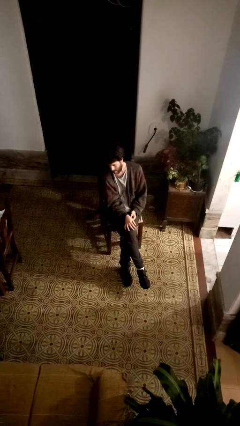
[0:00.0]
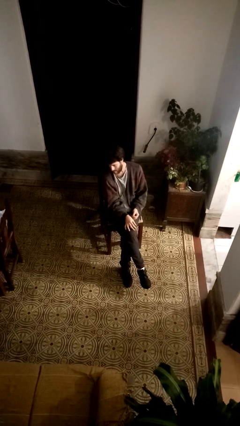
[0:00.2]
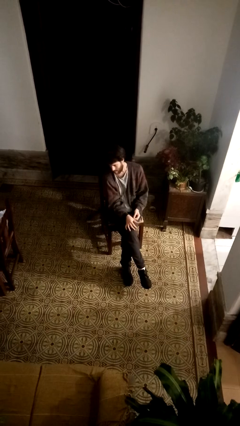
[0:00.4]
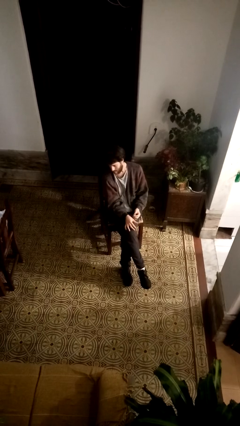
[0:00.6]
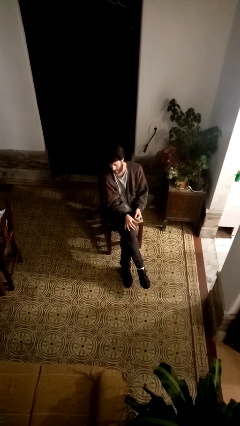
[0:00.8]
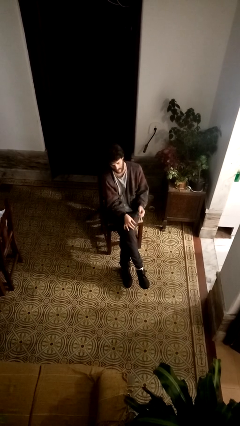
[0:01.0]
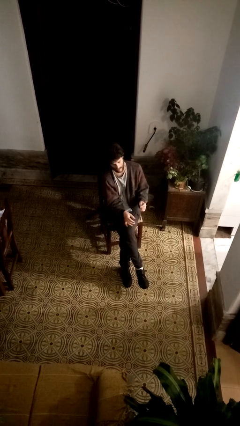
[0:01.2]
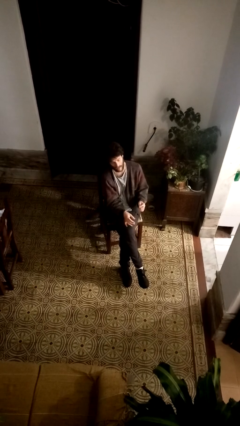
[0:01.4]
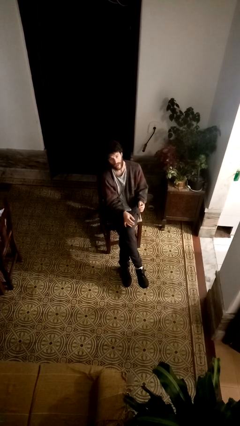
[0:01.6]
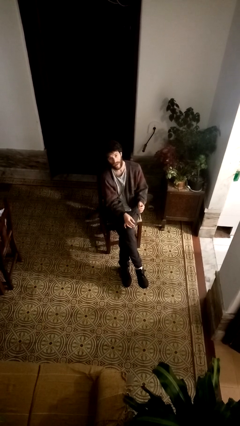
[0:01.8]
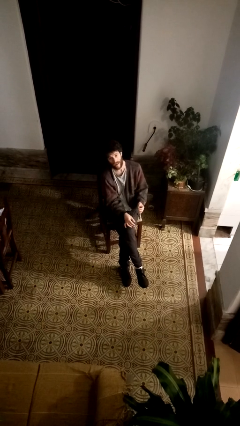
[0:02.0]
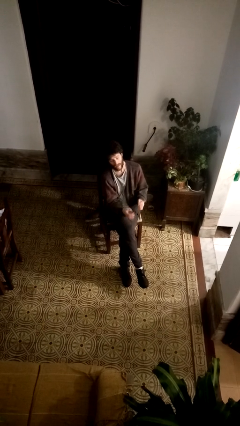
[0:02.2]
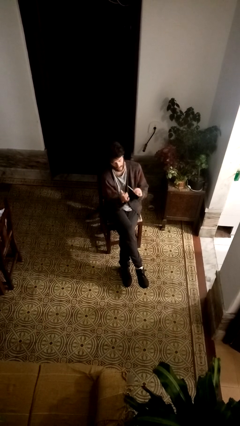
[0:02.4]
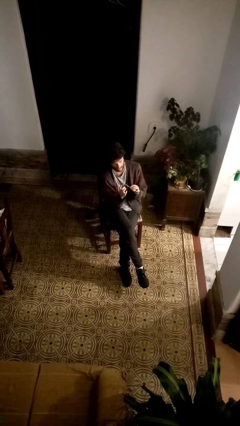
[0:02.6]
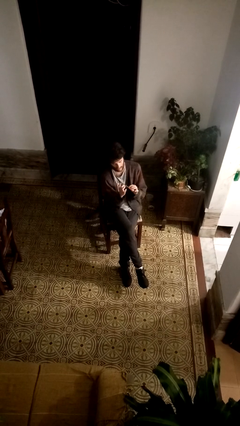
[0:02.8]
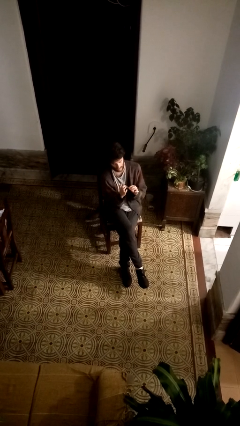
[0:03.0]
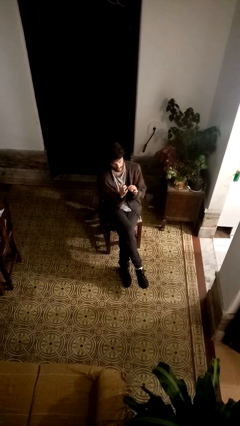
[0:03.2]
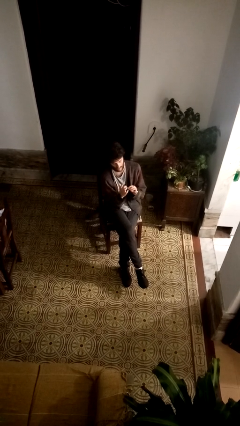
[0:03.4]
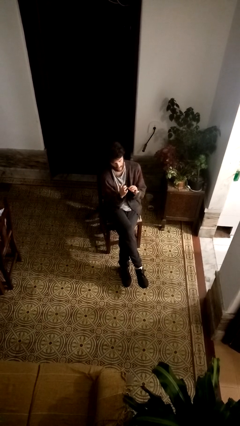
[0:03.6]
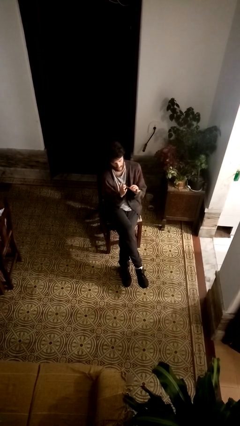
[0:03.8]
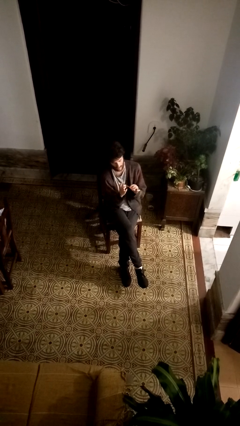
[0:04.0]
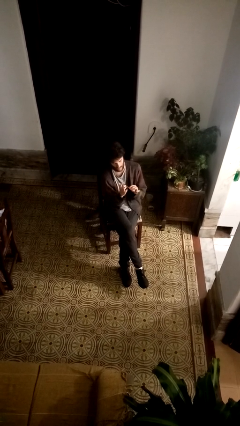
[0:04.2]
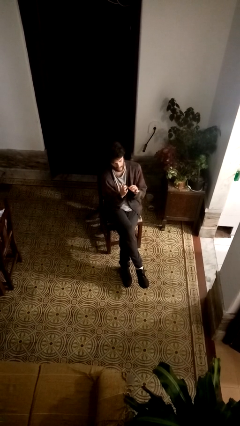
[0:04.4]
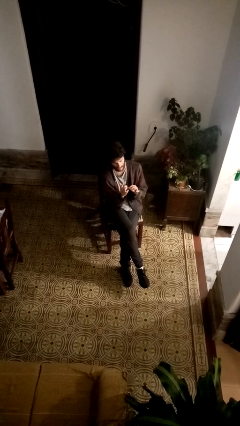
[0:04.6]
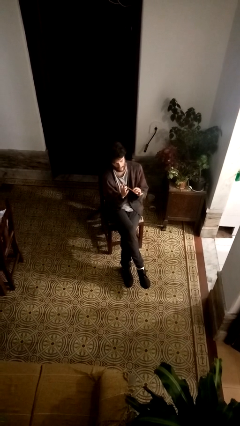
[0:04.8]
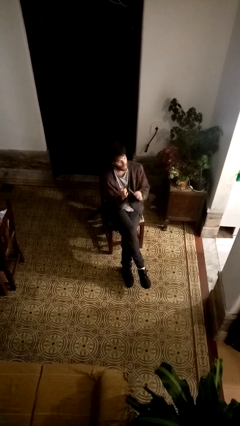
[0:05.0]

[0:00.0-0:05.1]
person files fingernails

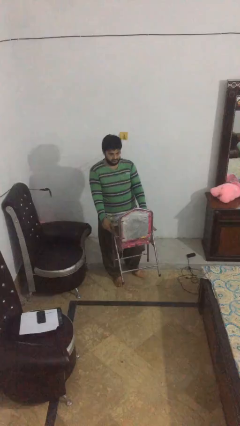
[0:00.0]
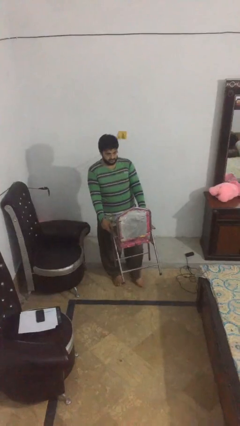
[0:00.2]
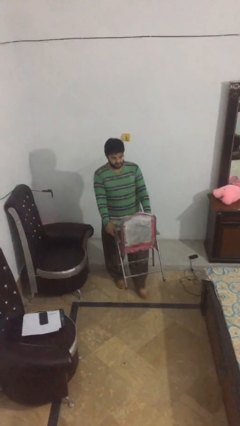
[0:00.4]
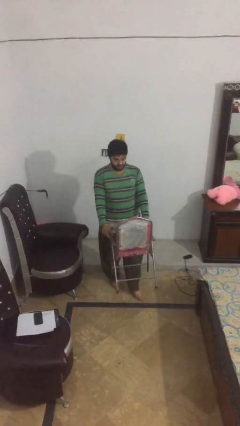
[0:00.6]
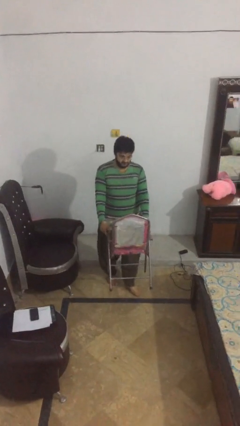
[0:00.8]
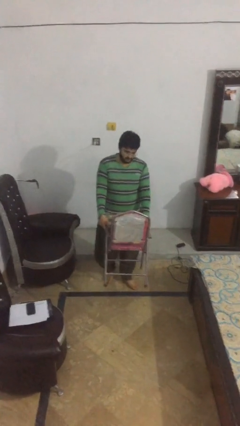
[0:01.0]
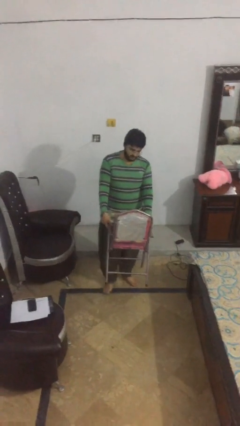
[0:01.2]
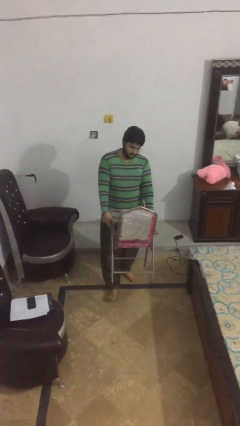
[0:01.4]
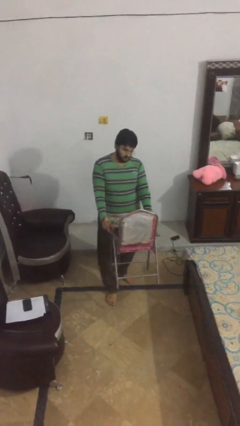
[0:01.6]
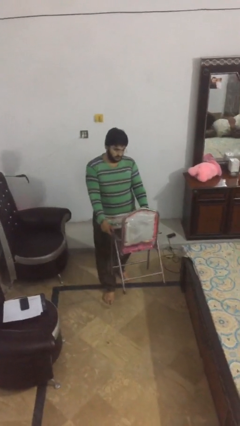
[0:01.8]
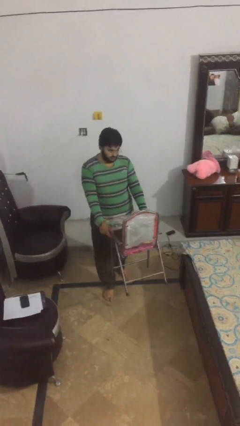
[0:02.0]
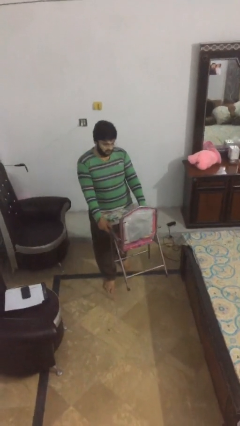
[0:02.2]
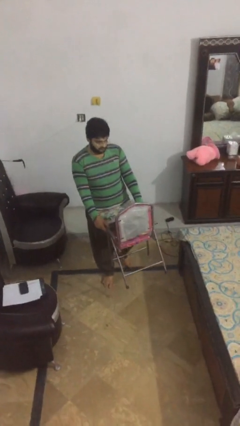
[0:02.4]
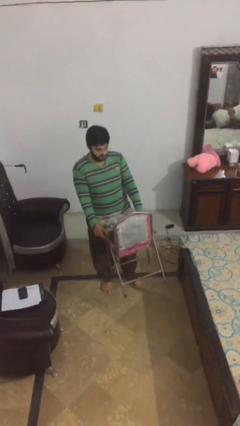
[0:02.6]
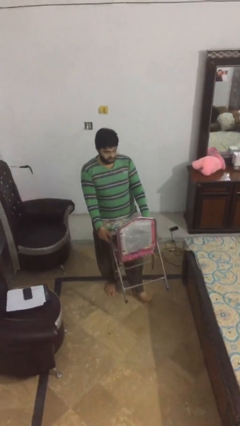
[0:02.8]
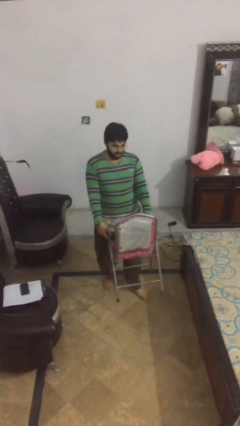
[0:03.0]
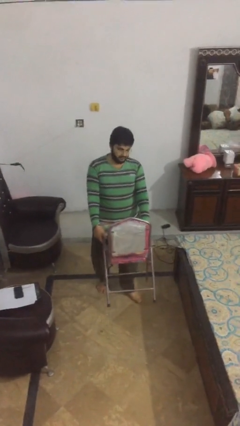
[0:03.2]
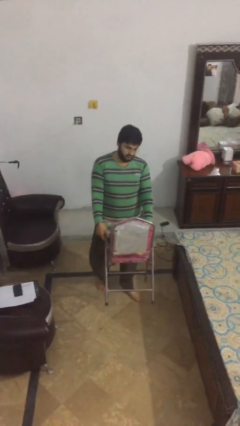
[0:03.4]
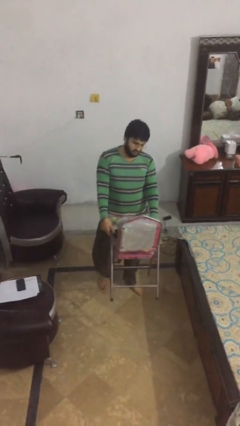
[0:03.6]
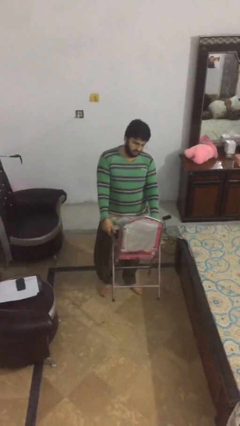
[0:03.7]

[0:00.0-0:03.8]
person carries heavy object

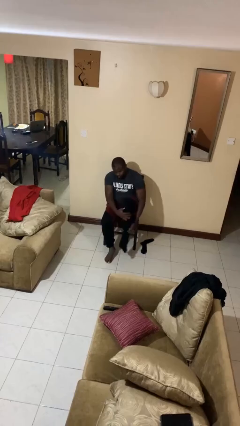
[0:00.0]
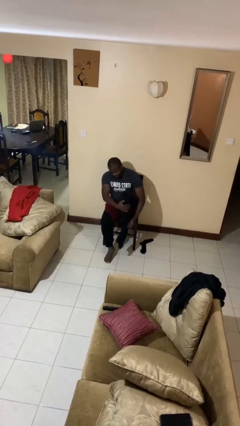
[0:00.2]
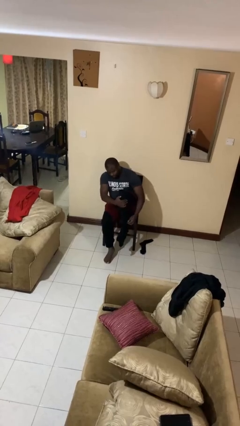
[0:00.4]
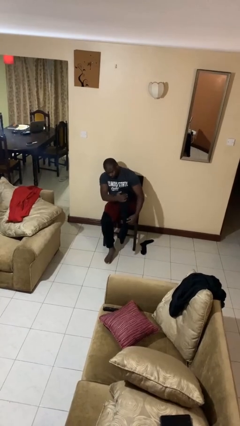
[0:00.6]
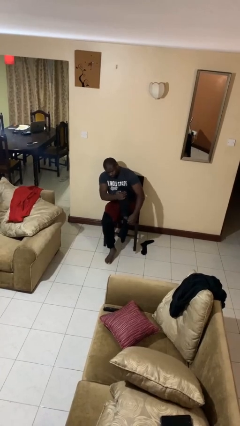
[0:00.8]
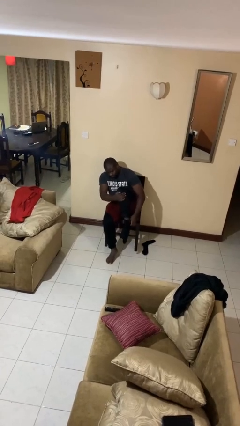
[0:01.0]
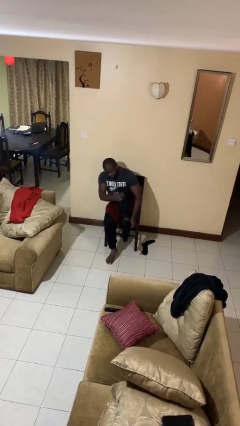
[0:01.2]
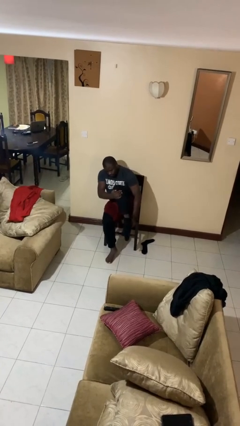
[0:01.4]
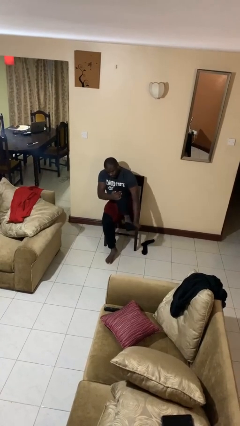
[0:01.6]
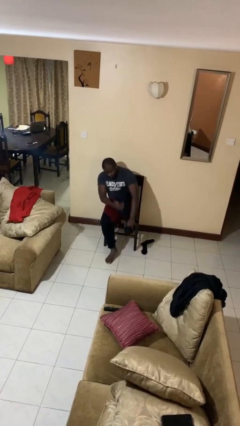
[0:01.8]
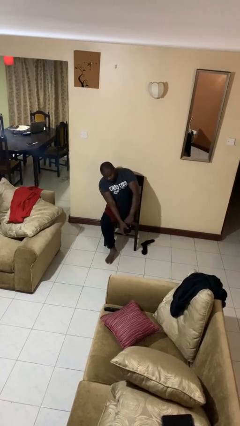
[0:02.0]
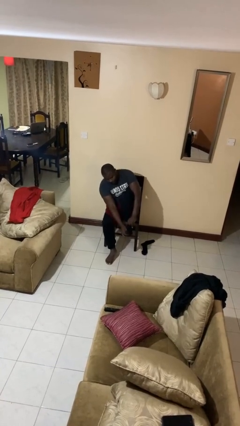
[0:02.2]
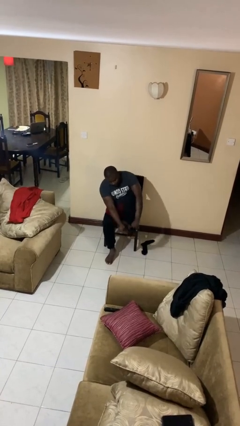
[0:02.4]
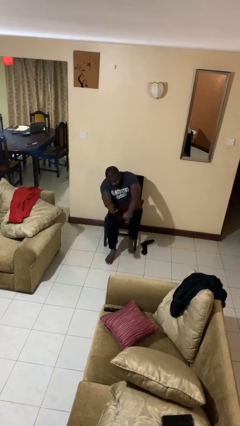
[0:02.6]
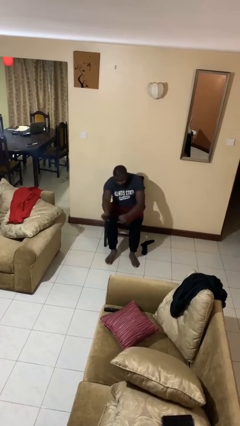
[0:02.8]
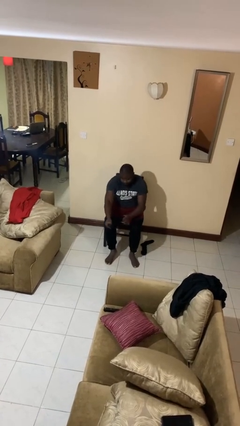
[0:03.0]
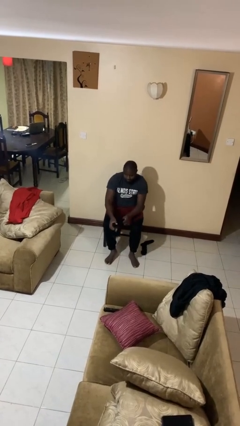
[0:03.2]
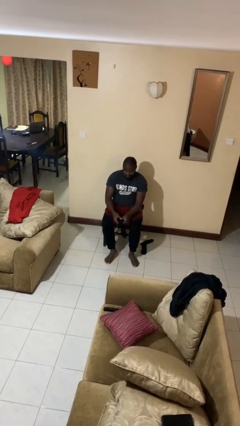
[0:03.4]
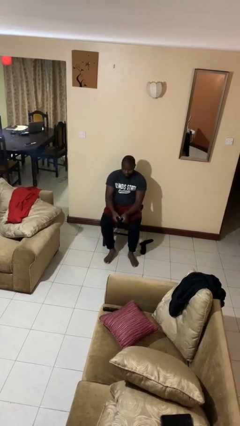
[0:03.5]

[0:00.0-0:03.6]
person takes off socks

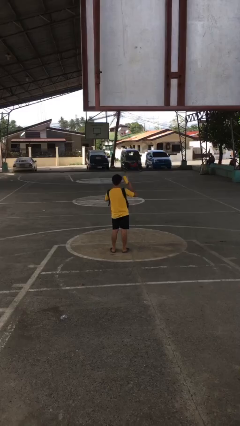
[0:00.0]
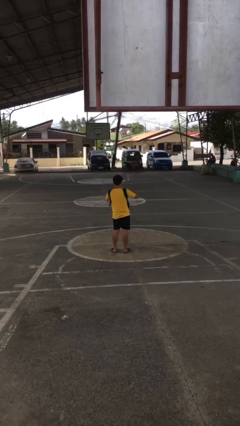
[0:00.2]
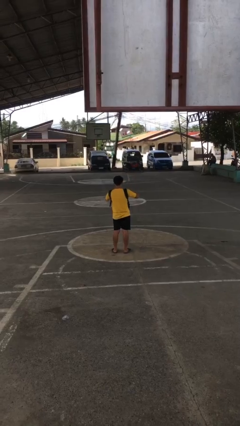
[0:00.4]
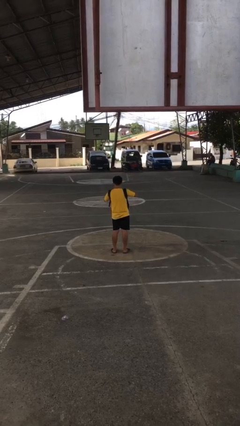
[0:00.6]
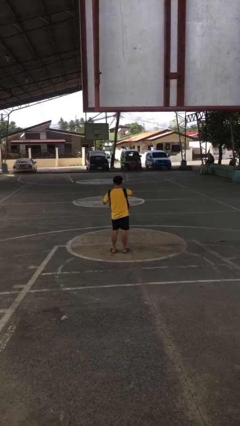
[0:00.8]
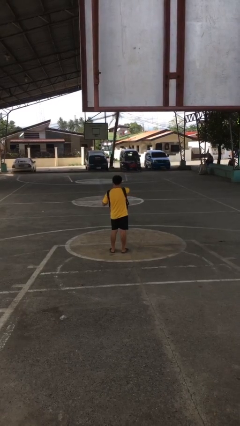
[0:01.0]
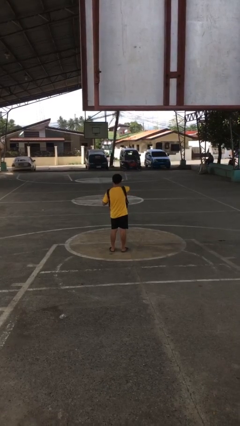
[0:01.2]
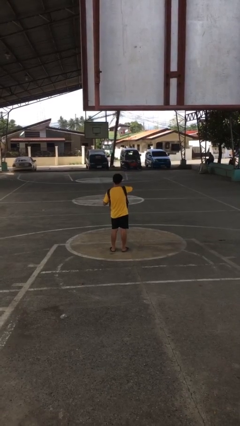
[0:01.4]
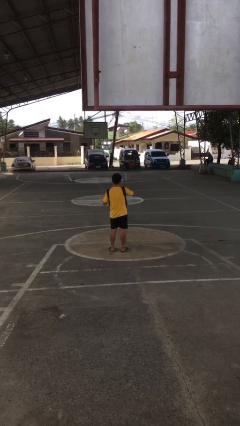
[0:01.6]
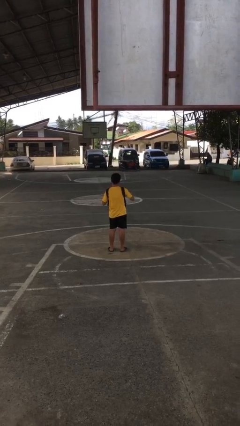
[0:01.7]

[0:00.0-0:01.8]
person puts object into backpack

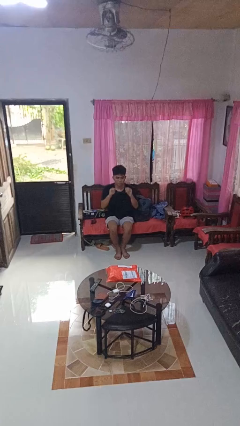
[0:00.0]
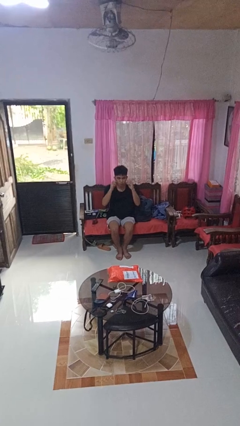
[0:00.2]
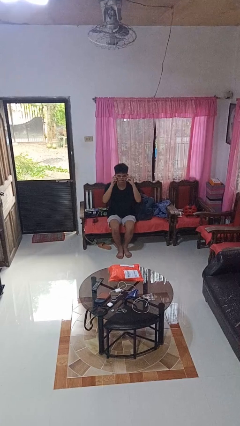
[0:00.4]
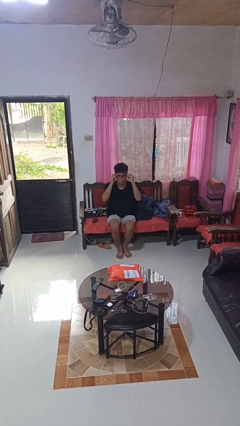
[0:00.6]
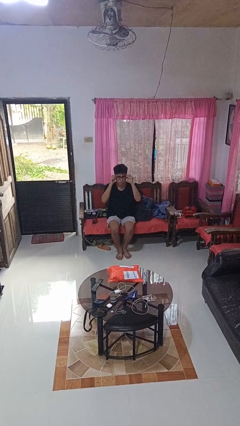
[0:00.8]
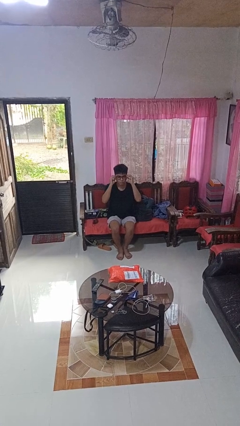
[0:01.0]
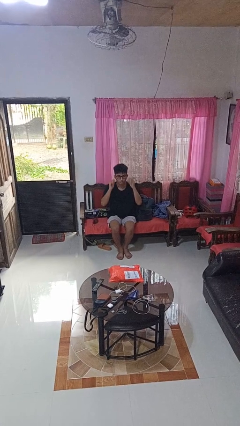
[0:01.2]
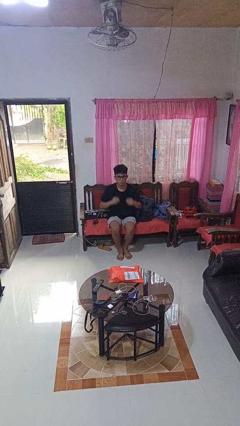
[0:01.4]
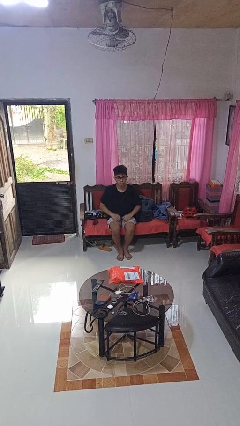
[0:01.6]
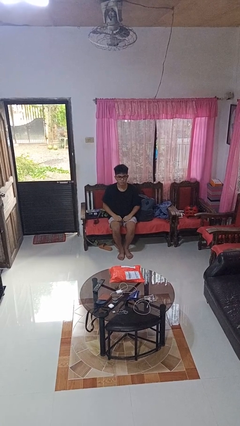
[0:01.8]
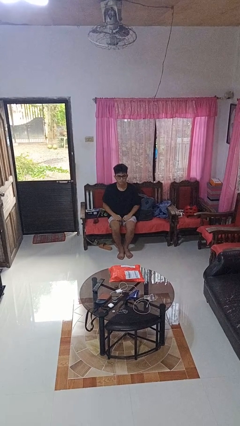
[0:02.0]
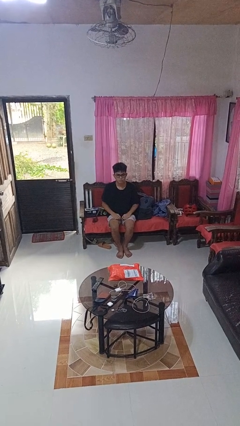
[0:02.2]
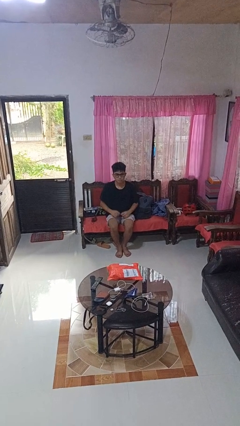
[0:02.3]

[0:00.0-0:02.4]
person puts on glasses

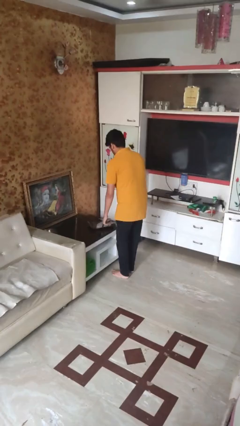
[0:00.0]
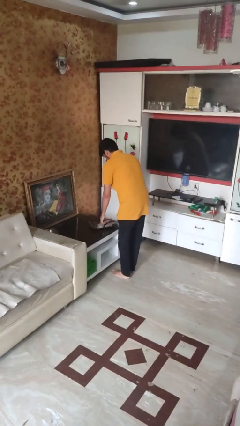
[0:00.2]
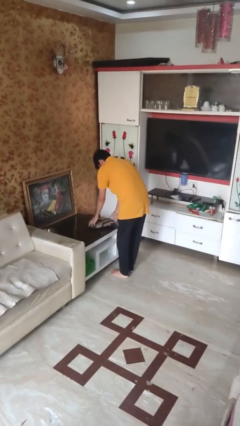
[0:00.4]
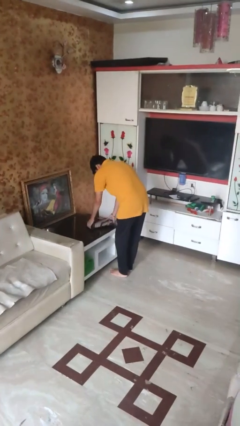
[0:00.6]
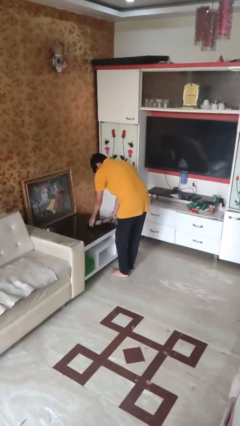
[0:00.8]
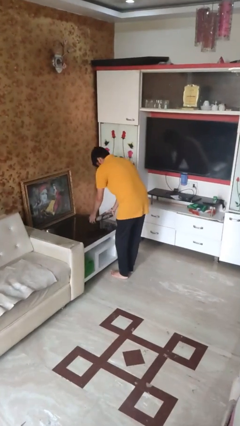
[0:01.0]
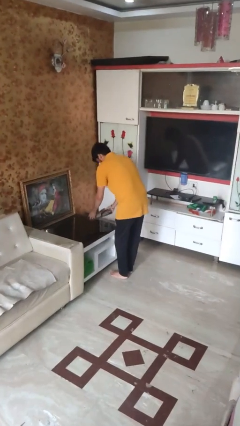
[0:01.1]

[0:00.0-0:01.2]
person picks up object from table
